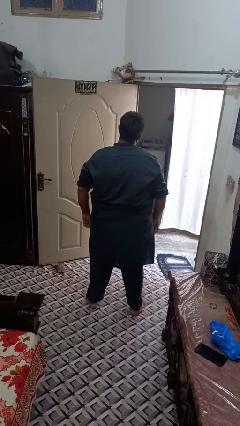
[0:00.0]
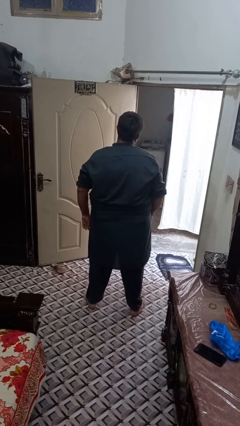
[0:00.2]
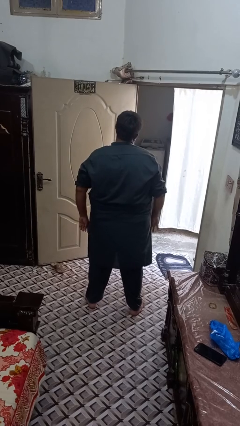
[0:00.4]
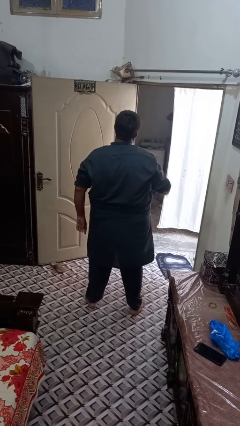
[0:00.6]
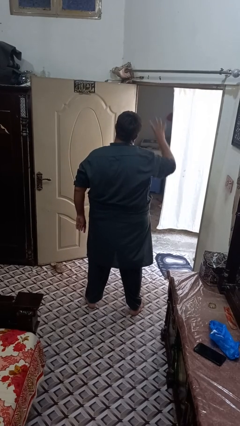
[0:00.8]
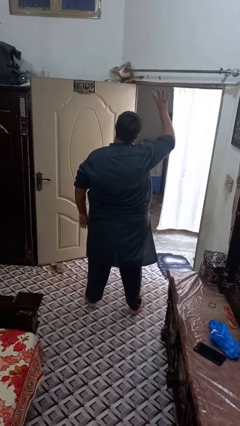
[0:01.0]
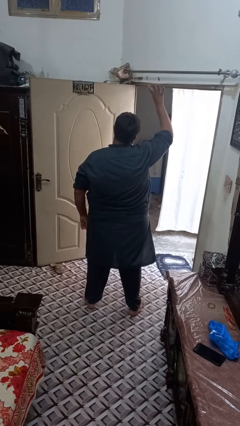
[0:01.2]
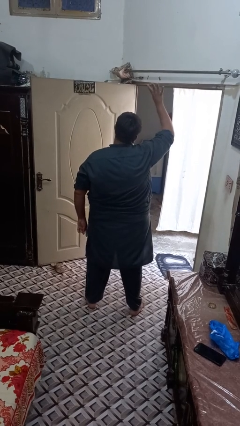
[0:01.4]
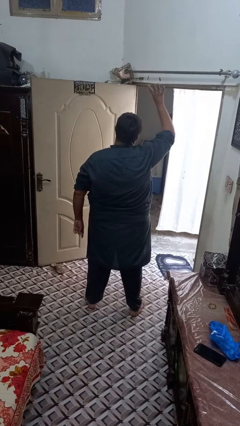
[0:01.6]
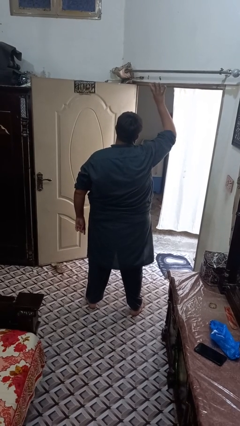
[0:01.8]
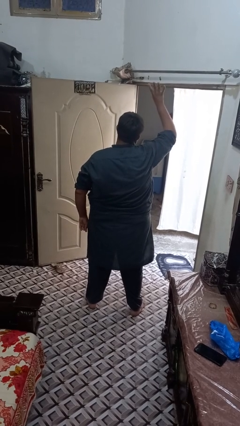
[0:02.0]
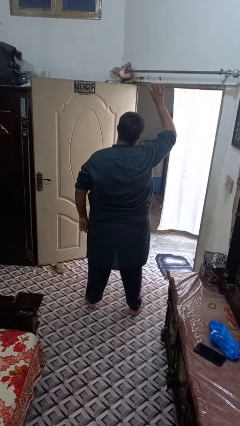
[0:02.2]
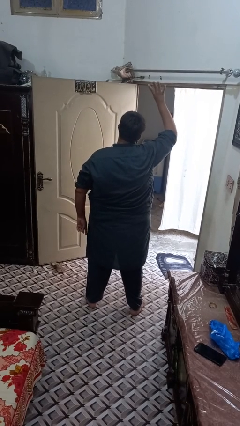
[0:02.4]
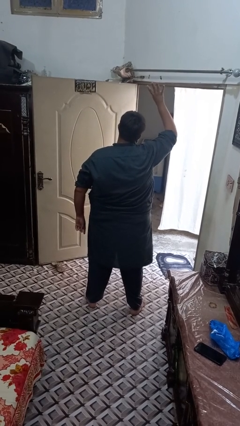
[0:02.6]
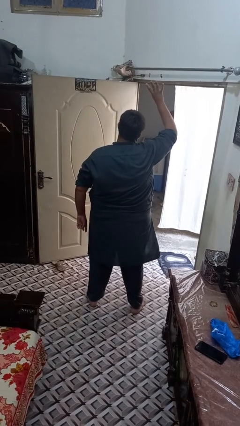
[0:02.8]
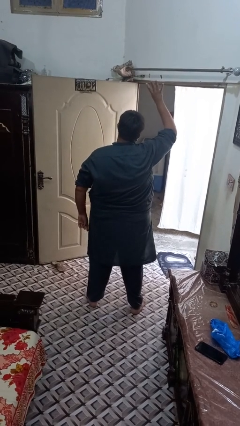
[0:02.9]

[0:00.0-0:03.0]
person gestures number four

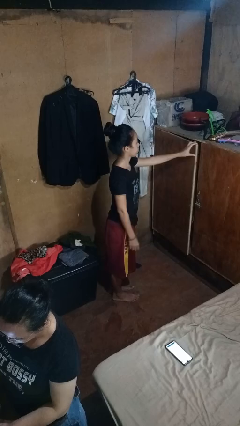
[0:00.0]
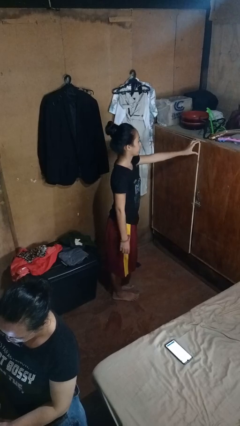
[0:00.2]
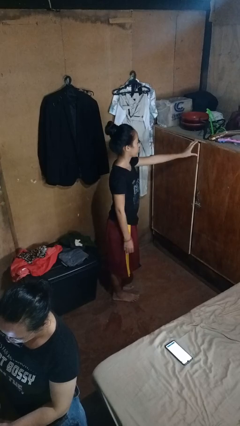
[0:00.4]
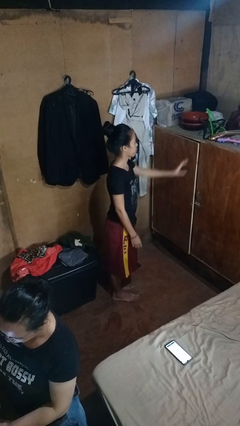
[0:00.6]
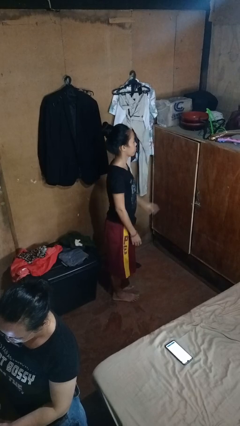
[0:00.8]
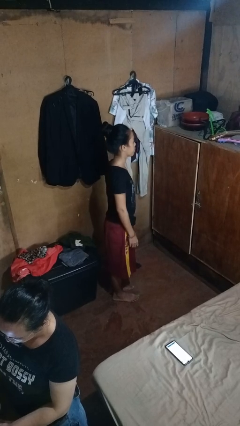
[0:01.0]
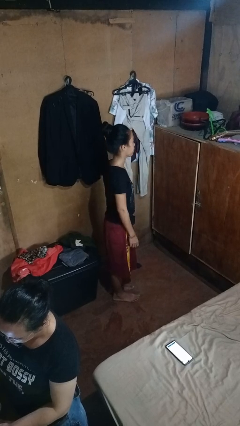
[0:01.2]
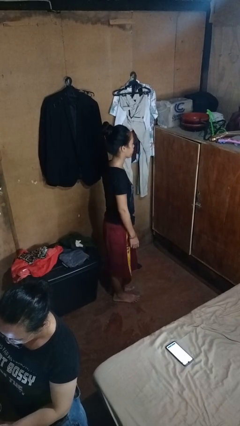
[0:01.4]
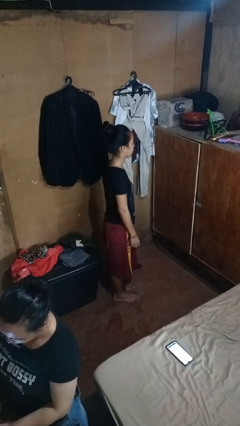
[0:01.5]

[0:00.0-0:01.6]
person closes closet door

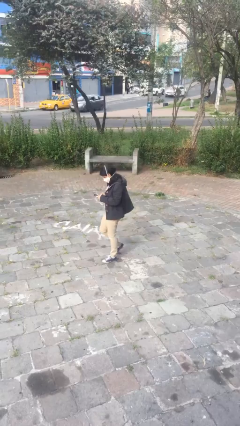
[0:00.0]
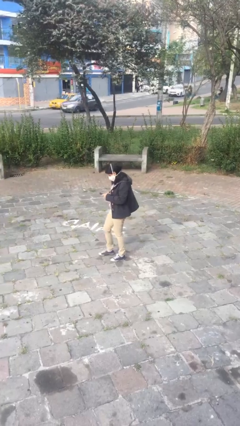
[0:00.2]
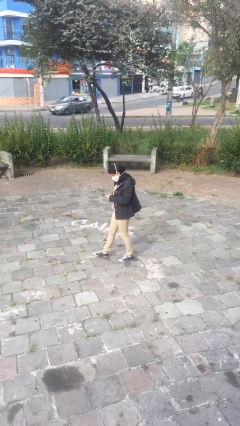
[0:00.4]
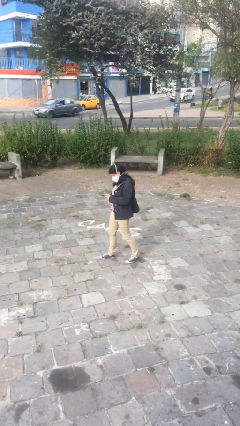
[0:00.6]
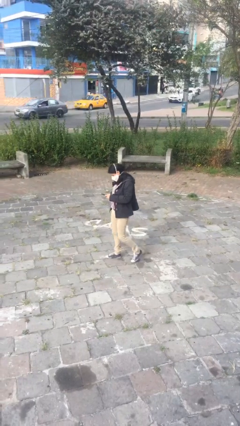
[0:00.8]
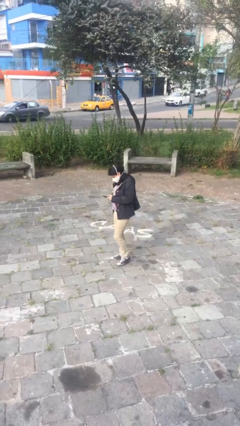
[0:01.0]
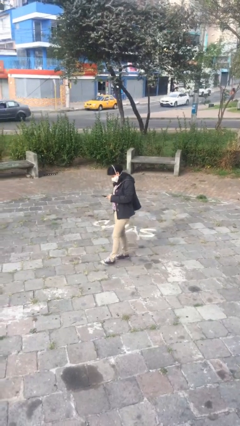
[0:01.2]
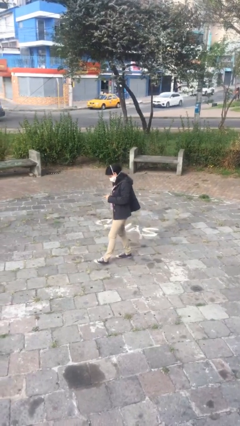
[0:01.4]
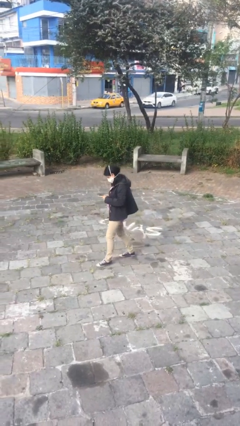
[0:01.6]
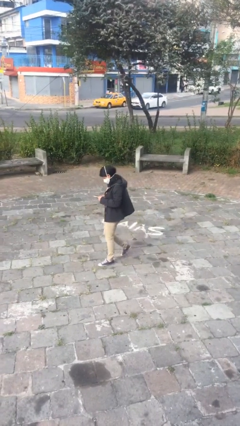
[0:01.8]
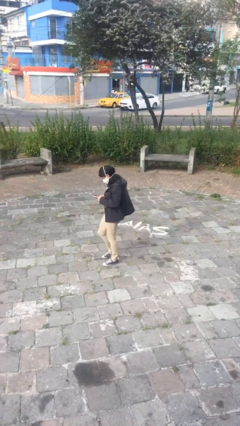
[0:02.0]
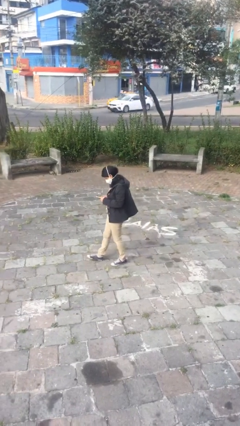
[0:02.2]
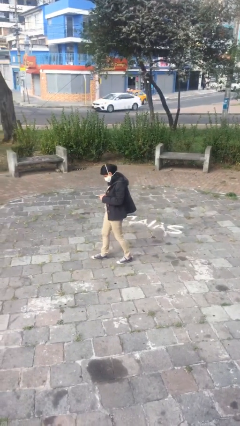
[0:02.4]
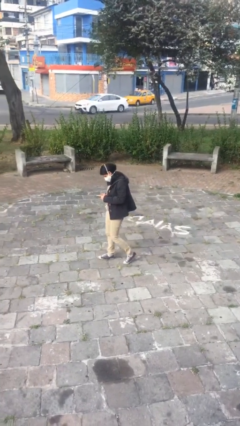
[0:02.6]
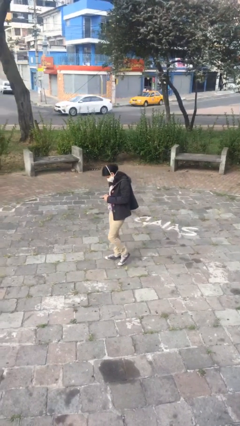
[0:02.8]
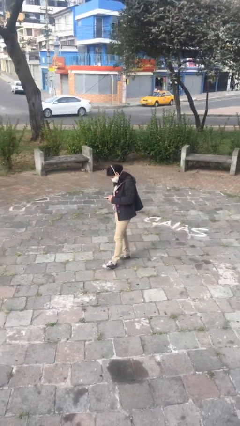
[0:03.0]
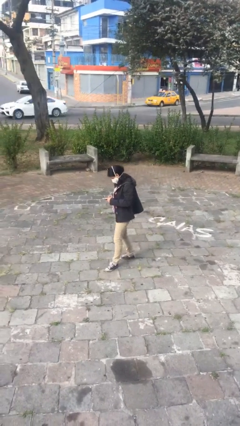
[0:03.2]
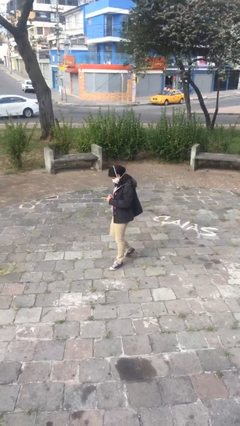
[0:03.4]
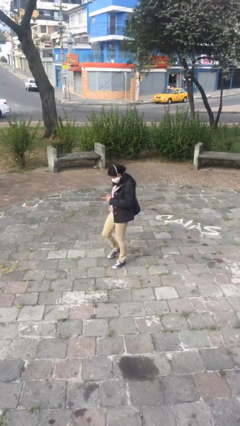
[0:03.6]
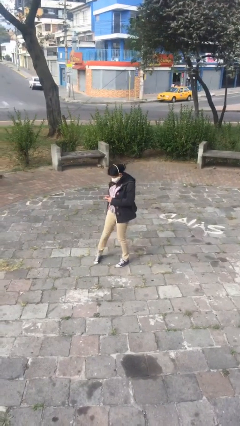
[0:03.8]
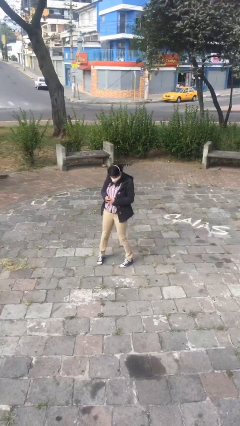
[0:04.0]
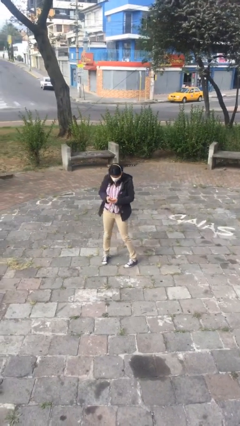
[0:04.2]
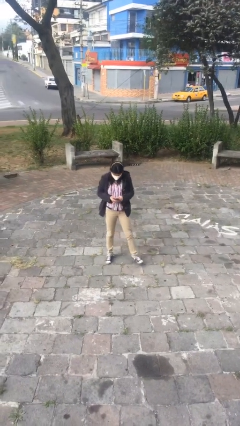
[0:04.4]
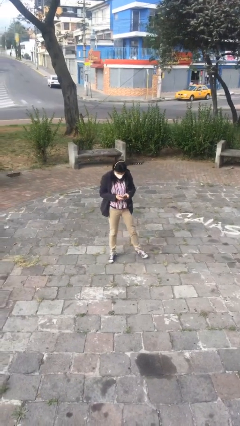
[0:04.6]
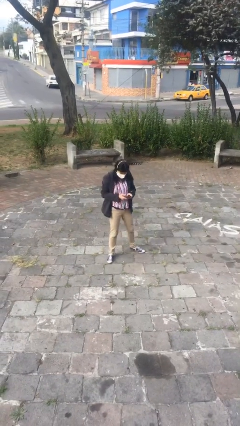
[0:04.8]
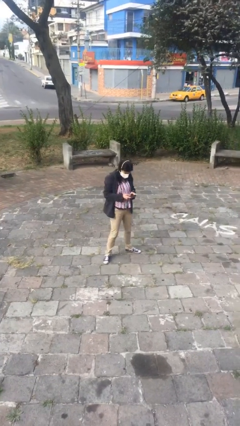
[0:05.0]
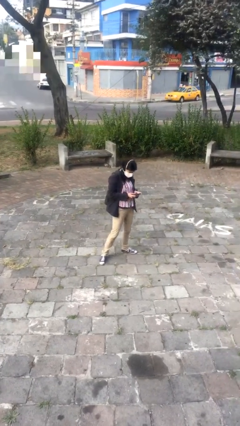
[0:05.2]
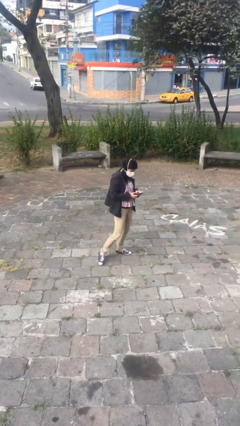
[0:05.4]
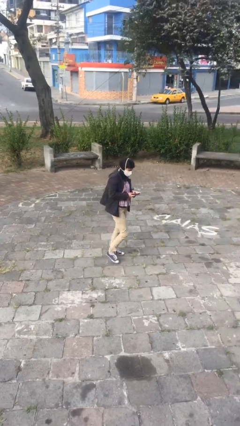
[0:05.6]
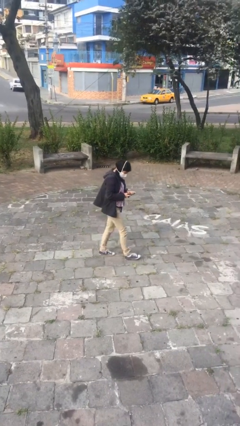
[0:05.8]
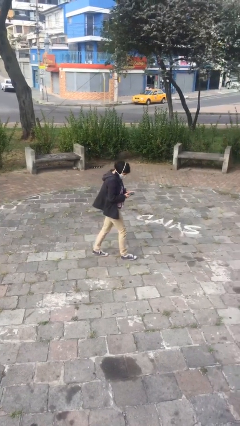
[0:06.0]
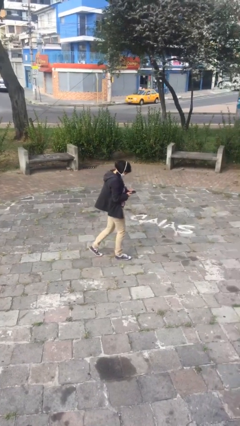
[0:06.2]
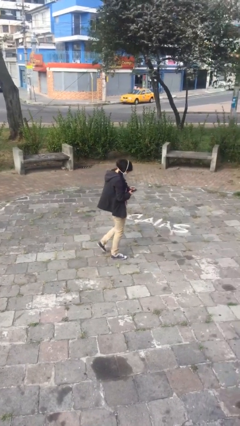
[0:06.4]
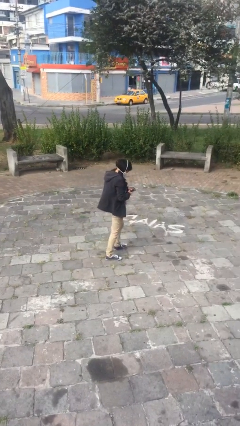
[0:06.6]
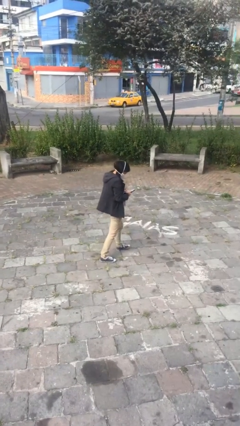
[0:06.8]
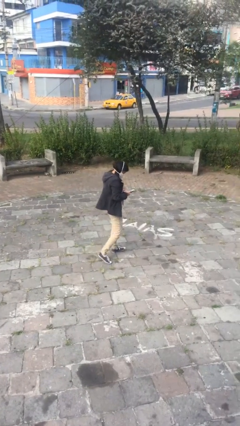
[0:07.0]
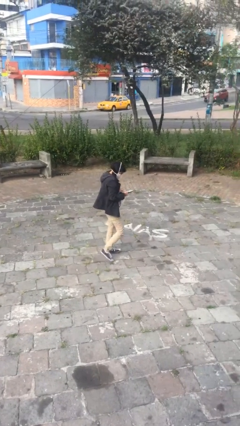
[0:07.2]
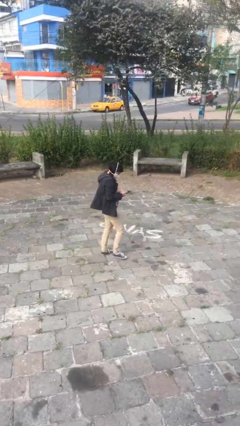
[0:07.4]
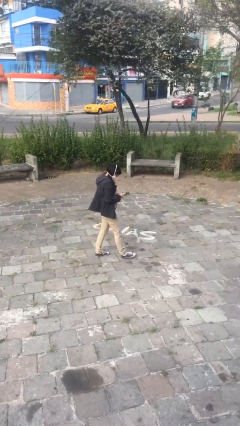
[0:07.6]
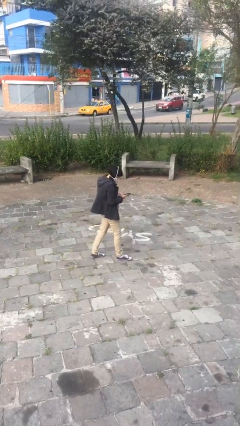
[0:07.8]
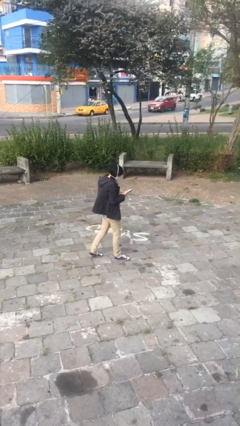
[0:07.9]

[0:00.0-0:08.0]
person texts on phone

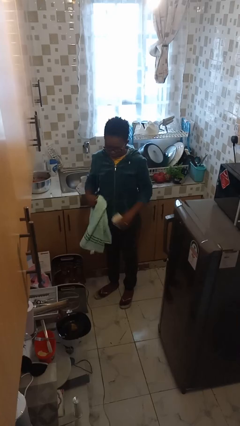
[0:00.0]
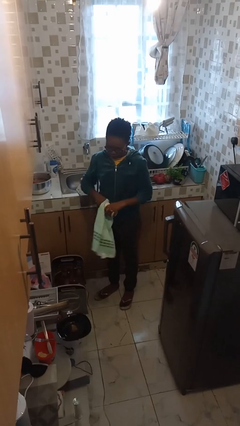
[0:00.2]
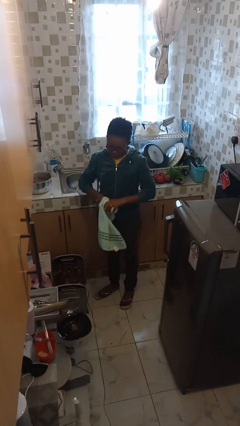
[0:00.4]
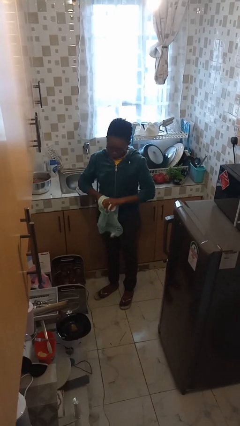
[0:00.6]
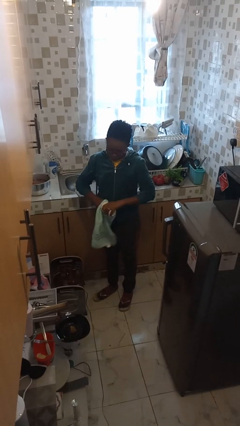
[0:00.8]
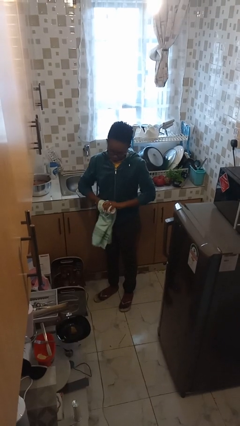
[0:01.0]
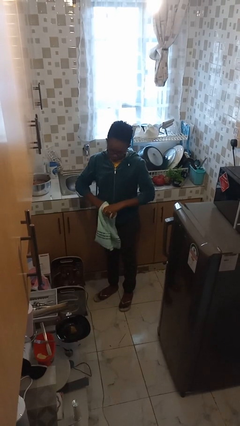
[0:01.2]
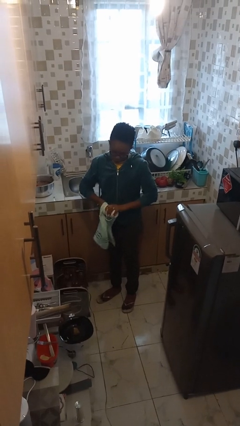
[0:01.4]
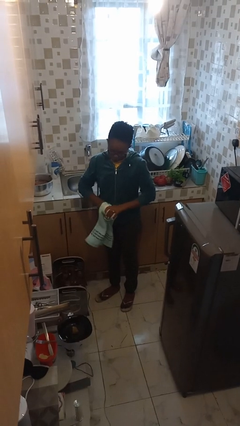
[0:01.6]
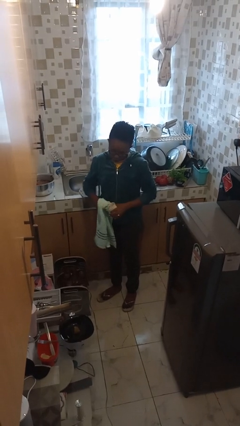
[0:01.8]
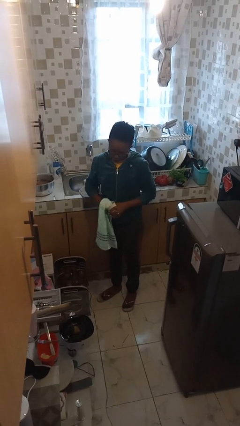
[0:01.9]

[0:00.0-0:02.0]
person dries dish

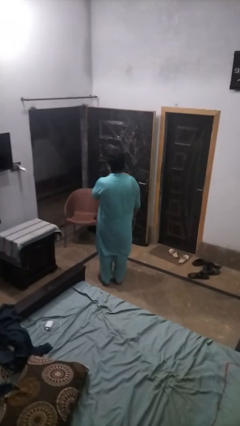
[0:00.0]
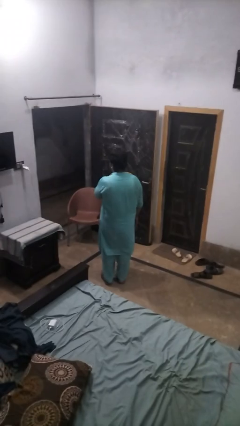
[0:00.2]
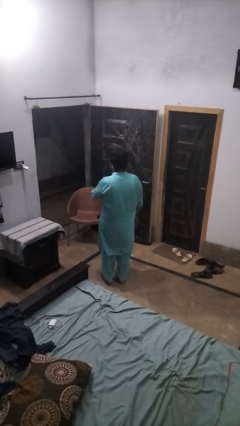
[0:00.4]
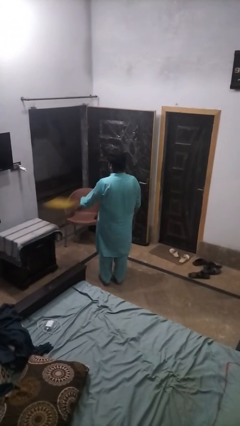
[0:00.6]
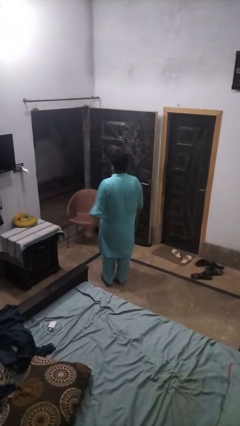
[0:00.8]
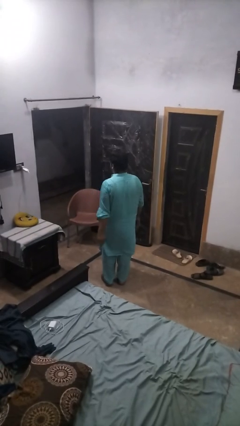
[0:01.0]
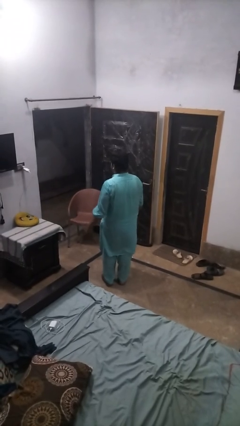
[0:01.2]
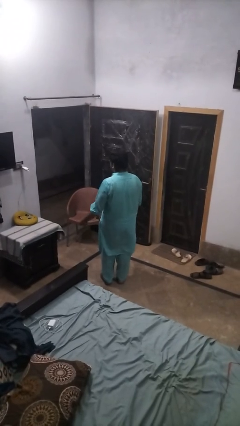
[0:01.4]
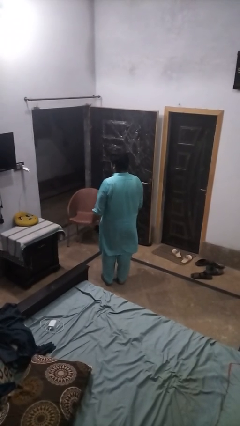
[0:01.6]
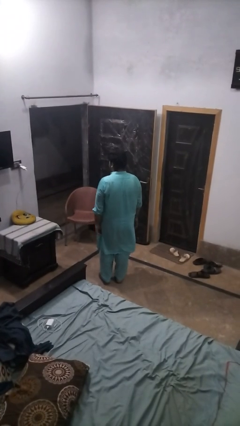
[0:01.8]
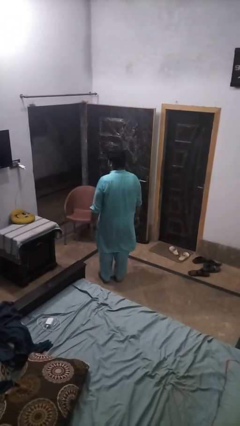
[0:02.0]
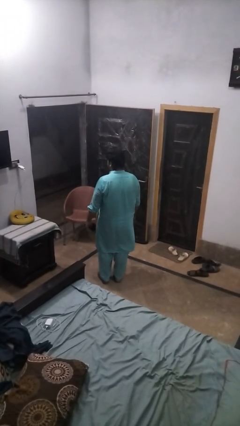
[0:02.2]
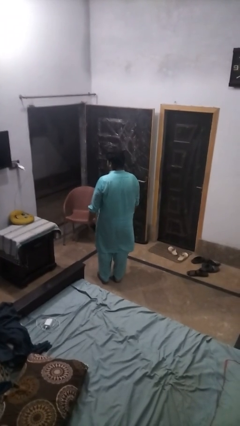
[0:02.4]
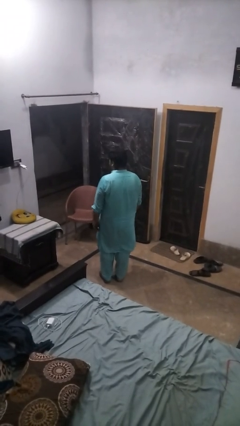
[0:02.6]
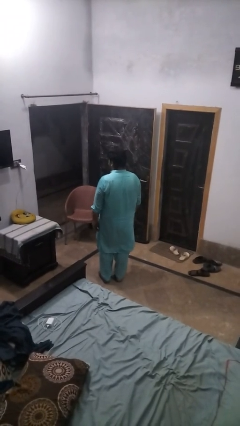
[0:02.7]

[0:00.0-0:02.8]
person throws object on table
